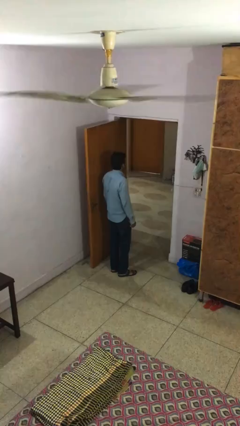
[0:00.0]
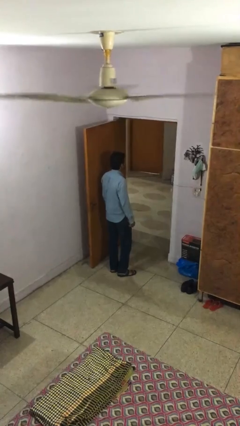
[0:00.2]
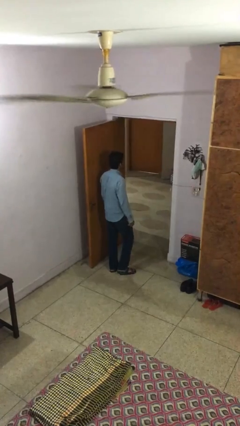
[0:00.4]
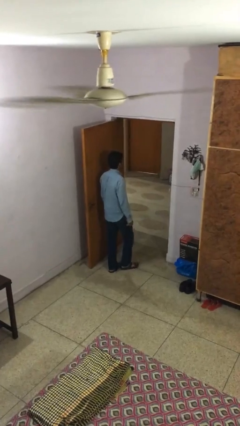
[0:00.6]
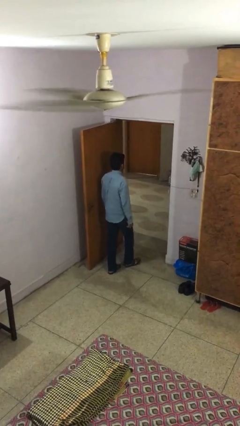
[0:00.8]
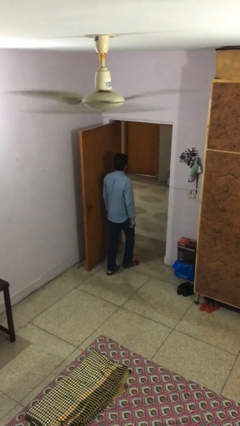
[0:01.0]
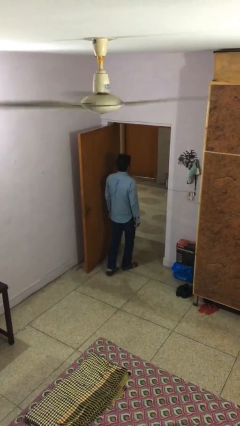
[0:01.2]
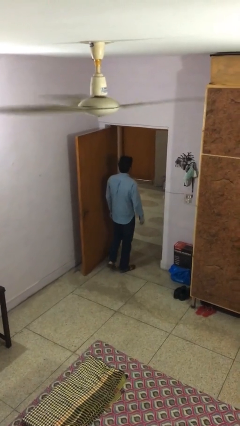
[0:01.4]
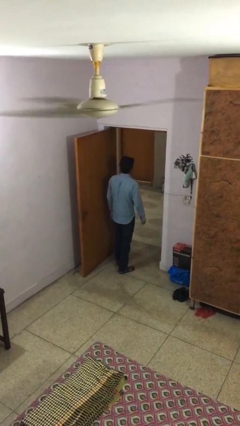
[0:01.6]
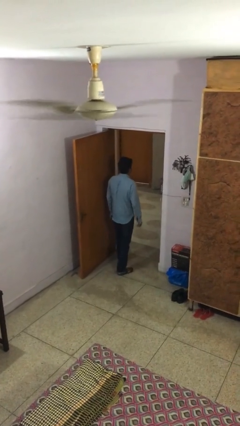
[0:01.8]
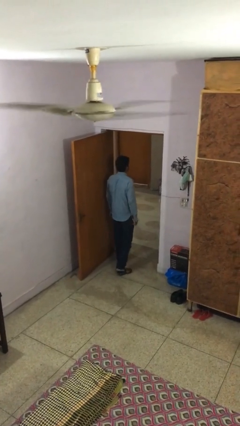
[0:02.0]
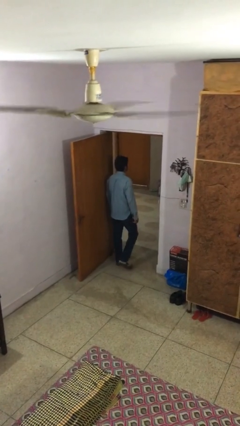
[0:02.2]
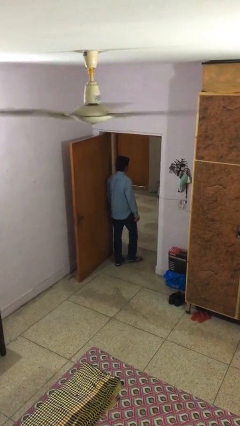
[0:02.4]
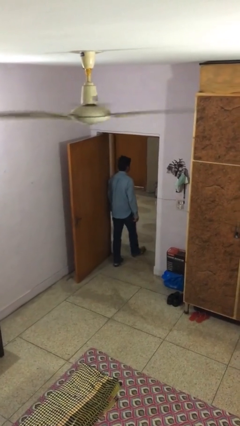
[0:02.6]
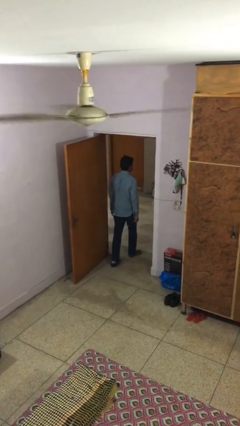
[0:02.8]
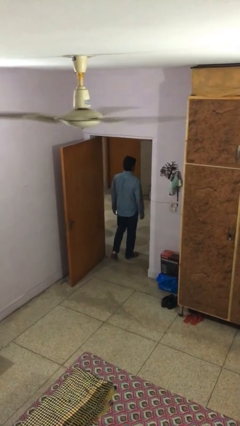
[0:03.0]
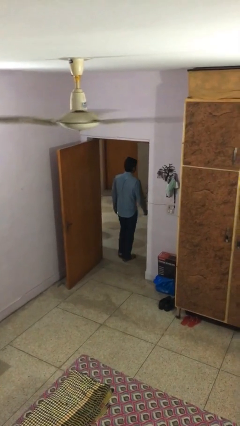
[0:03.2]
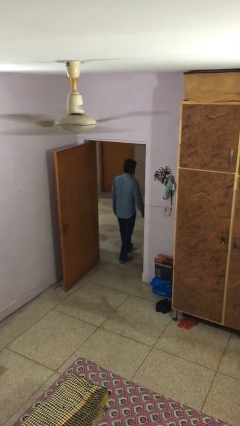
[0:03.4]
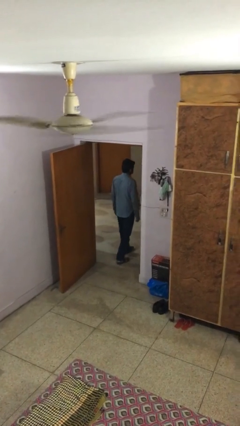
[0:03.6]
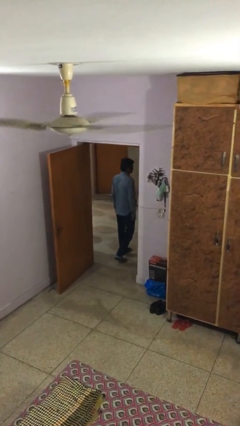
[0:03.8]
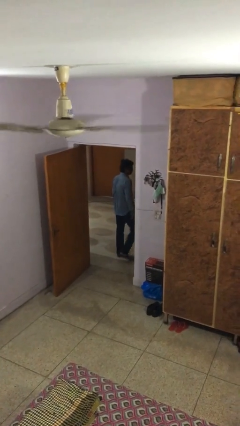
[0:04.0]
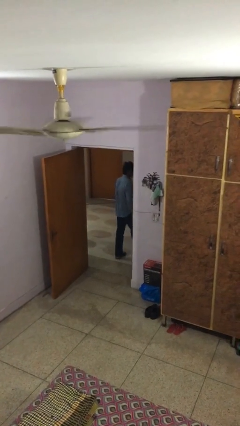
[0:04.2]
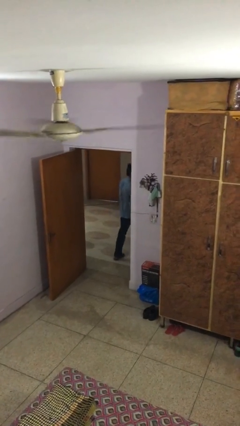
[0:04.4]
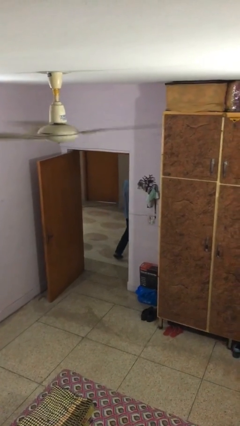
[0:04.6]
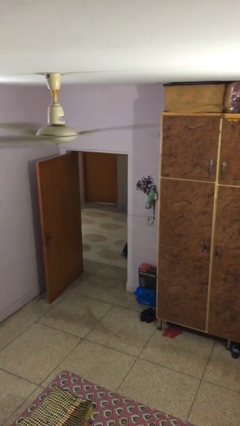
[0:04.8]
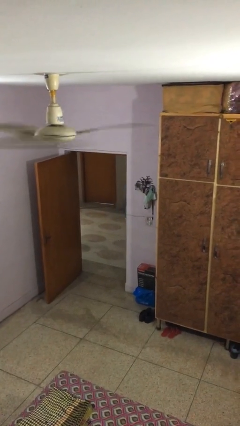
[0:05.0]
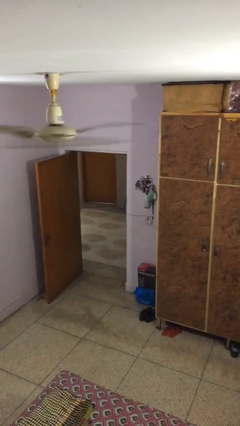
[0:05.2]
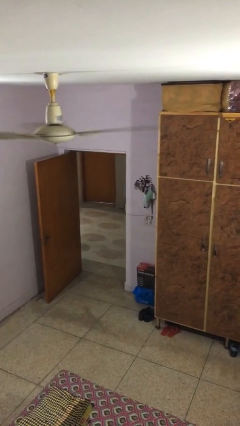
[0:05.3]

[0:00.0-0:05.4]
person exits scene through structure

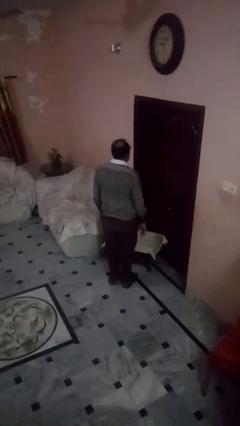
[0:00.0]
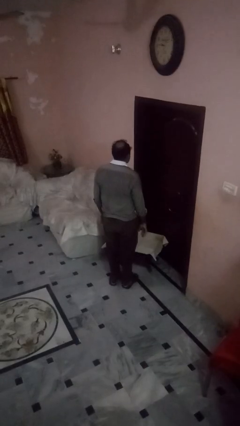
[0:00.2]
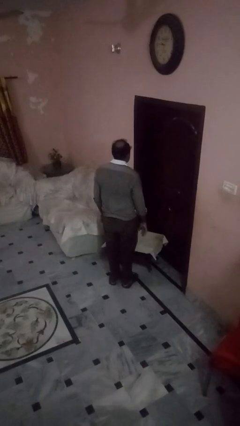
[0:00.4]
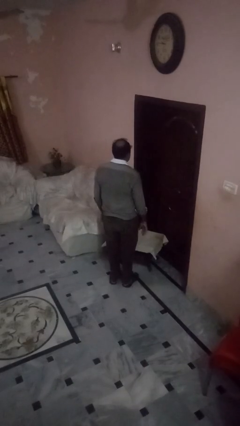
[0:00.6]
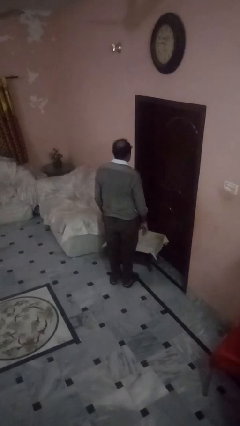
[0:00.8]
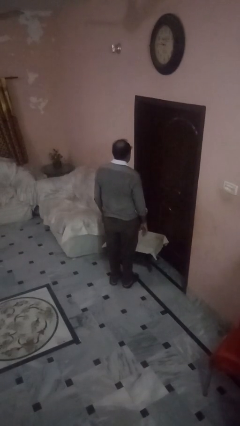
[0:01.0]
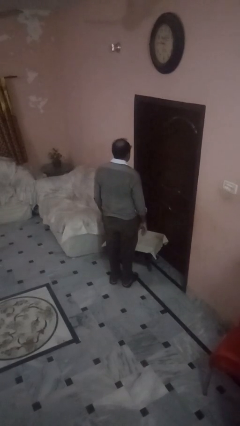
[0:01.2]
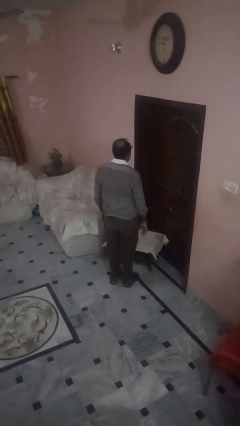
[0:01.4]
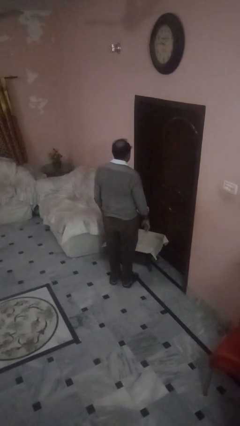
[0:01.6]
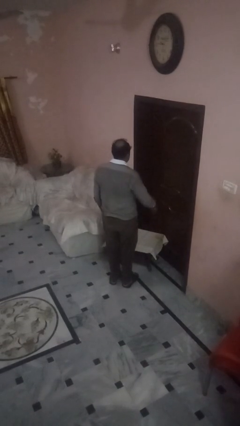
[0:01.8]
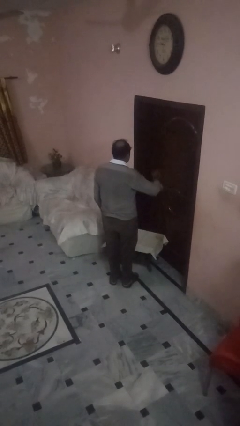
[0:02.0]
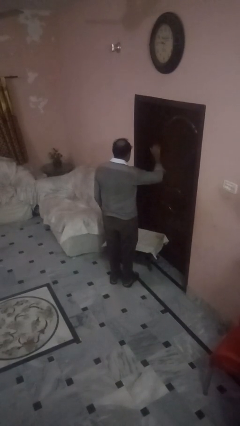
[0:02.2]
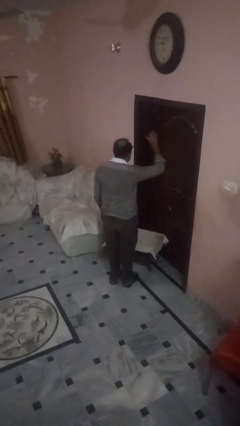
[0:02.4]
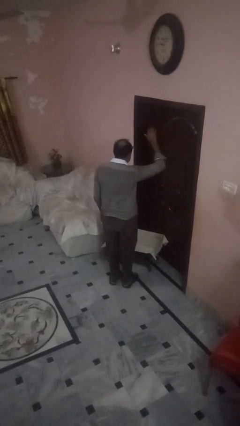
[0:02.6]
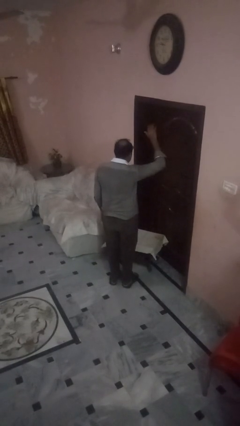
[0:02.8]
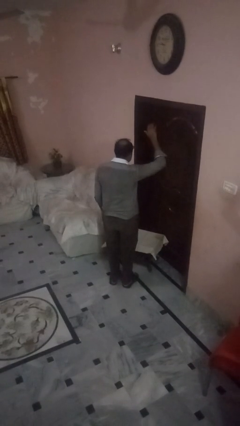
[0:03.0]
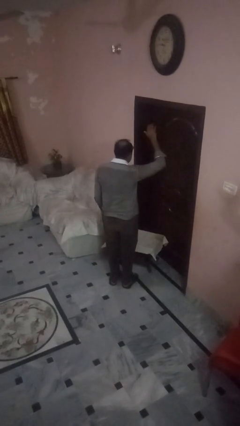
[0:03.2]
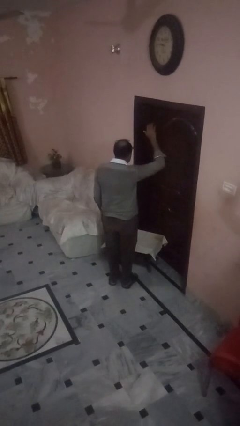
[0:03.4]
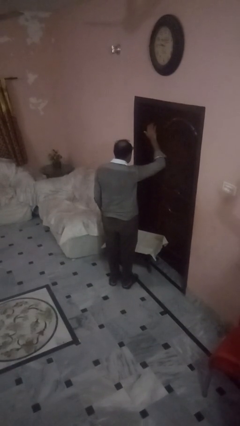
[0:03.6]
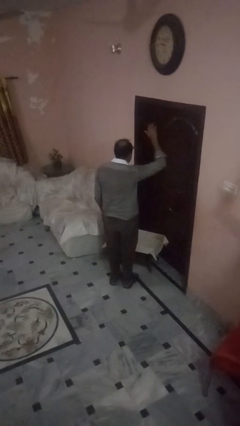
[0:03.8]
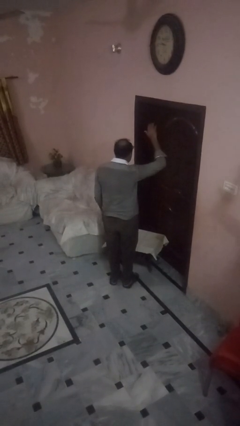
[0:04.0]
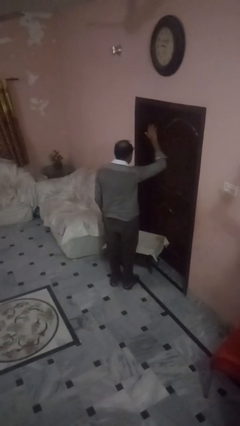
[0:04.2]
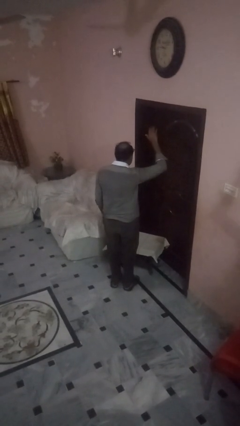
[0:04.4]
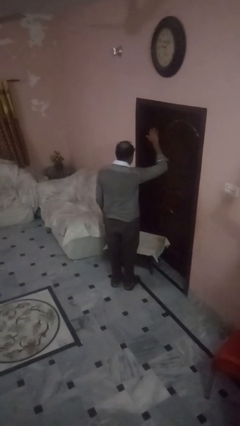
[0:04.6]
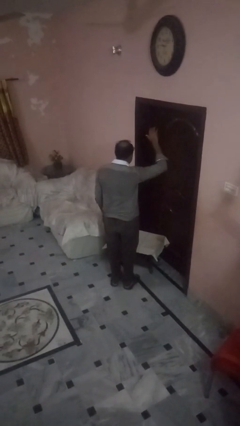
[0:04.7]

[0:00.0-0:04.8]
person handstand

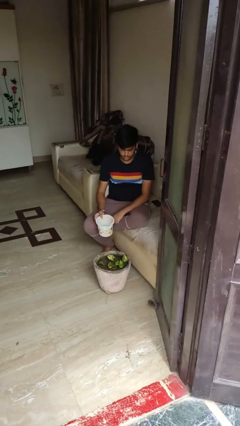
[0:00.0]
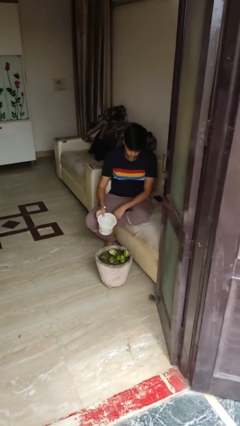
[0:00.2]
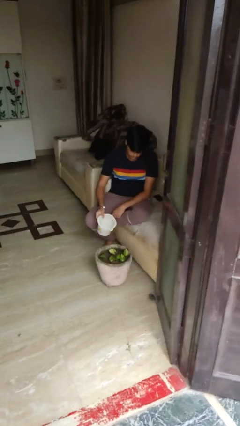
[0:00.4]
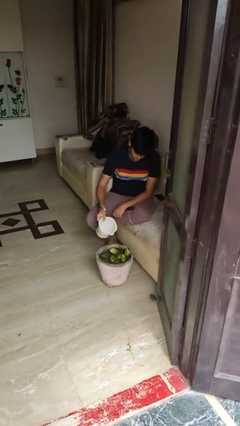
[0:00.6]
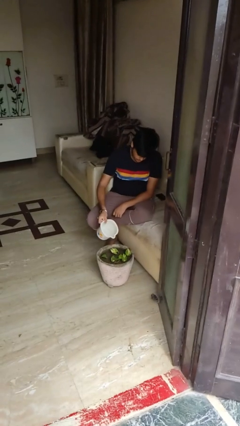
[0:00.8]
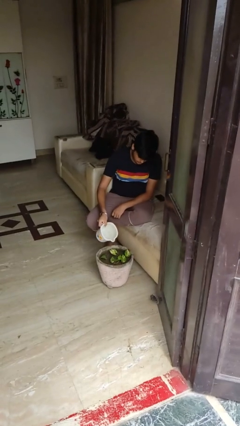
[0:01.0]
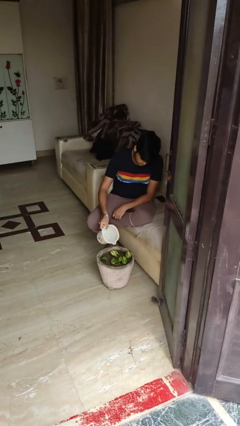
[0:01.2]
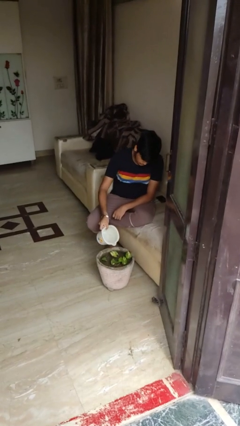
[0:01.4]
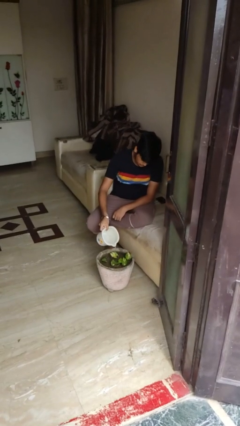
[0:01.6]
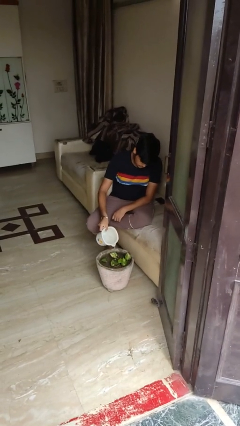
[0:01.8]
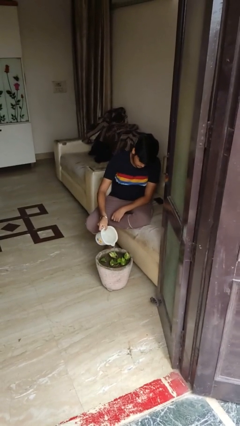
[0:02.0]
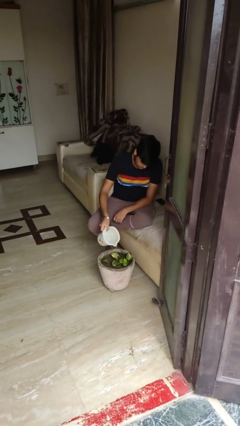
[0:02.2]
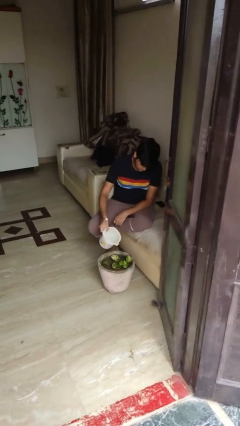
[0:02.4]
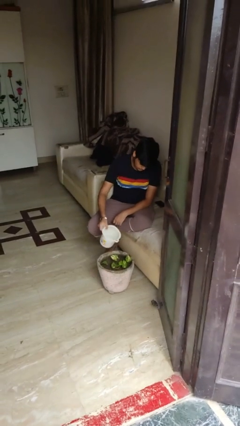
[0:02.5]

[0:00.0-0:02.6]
person waters houseplant

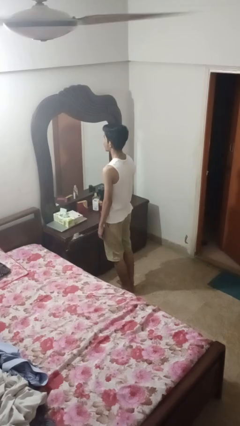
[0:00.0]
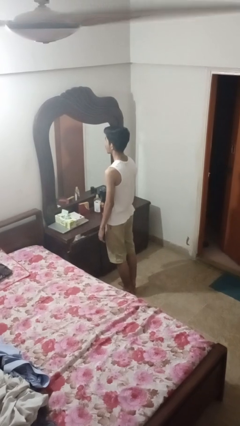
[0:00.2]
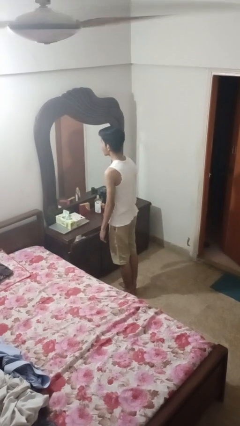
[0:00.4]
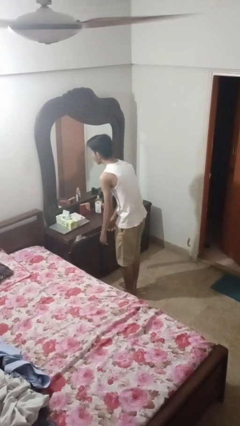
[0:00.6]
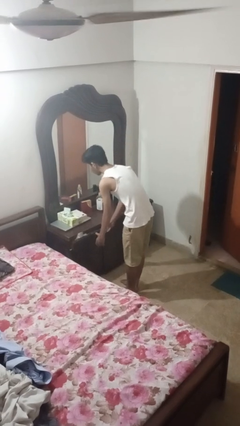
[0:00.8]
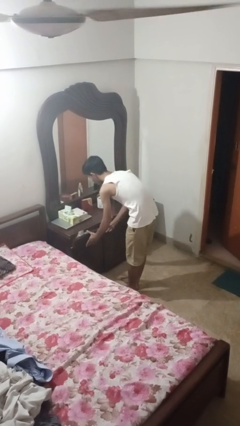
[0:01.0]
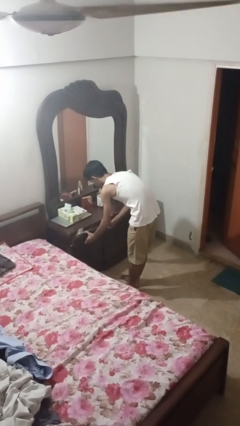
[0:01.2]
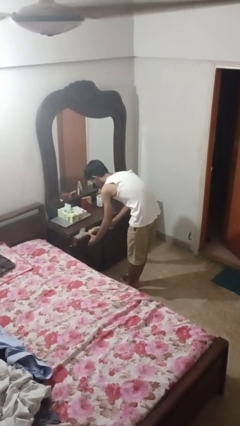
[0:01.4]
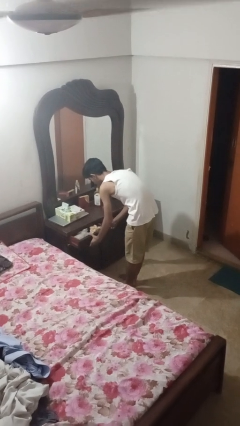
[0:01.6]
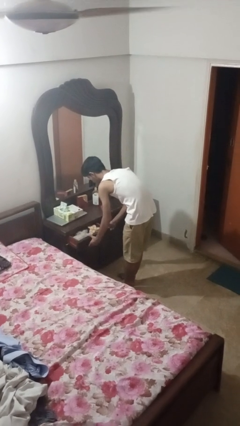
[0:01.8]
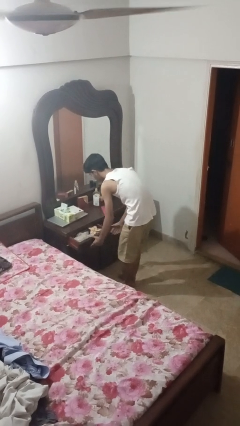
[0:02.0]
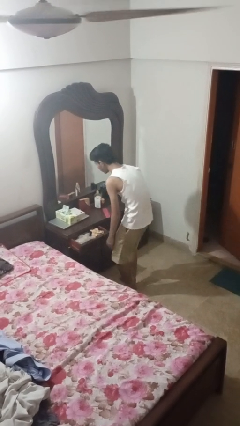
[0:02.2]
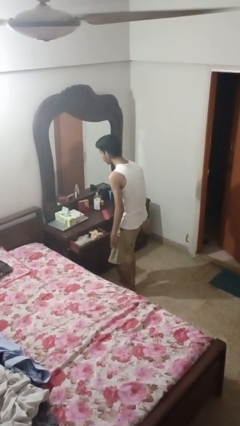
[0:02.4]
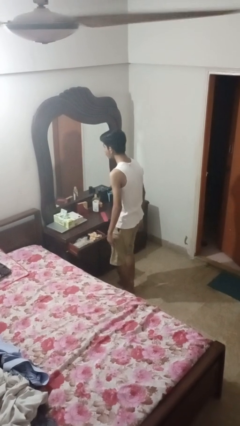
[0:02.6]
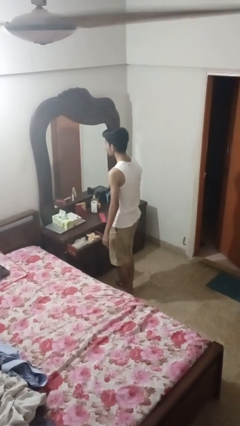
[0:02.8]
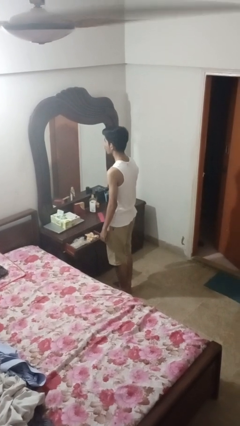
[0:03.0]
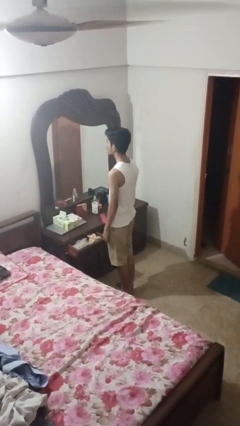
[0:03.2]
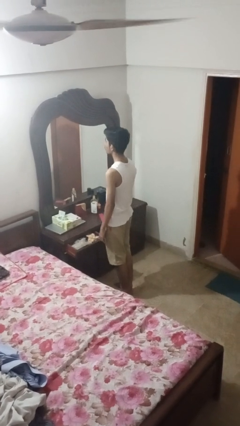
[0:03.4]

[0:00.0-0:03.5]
person opens dresser drawer

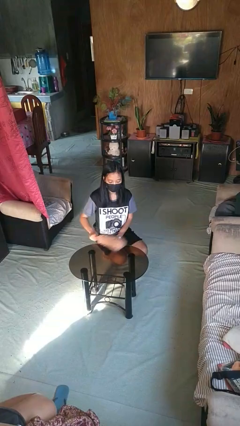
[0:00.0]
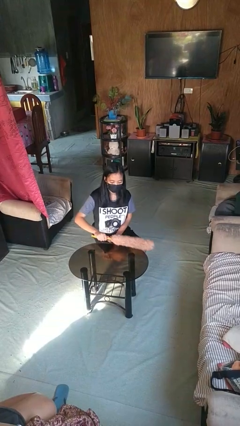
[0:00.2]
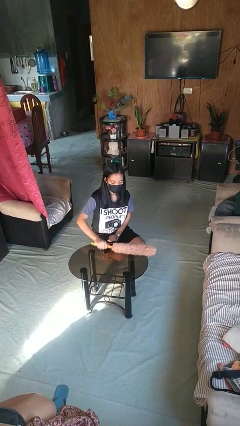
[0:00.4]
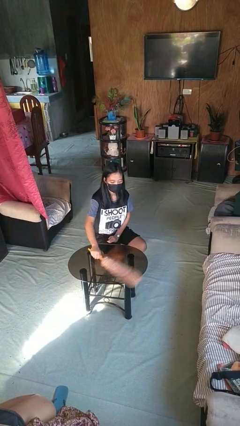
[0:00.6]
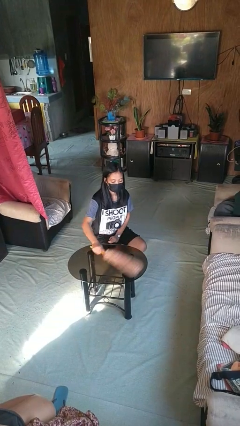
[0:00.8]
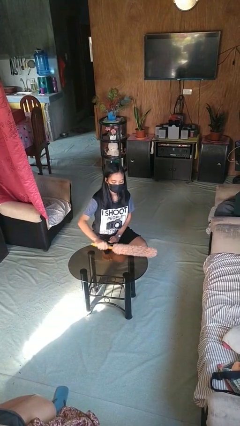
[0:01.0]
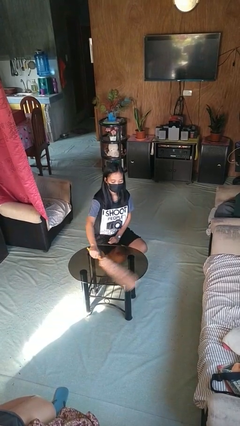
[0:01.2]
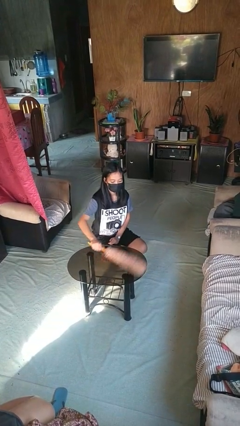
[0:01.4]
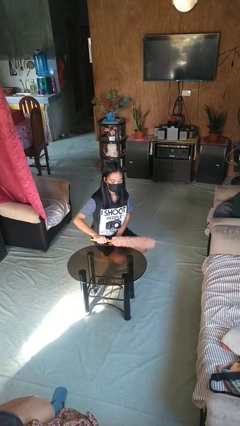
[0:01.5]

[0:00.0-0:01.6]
person dusts furniture
